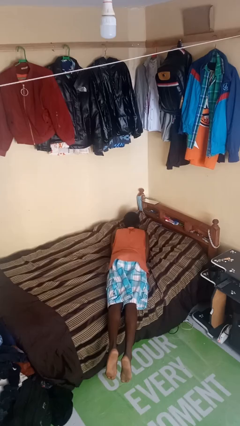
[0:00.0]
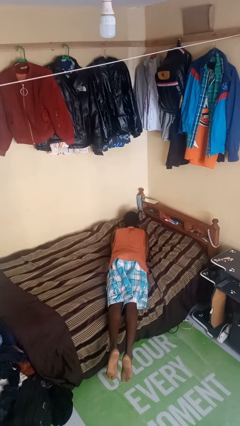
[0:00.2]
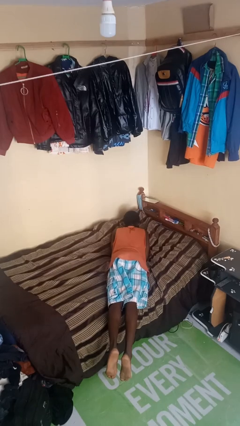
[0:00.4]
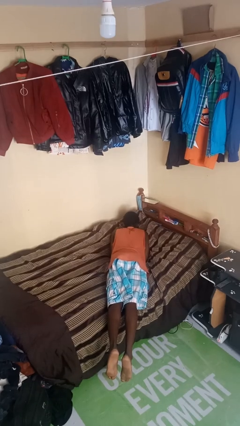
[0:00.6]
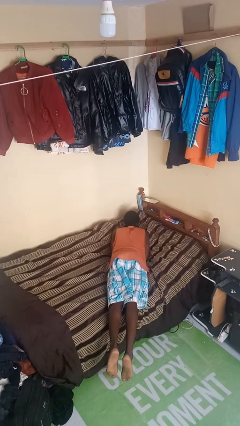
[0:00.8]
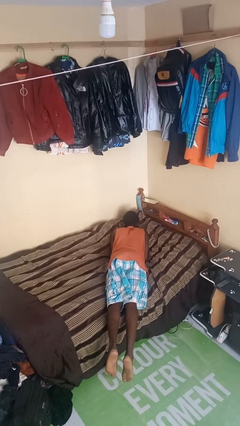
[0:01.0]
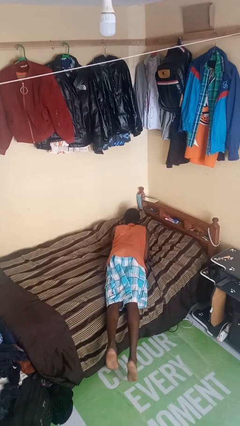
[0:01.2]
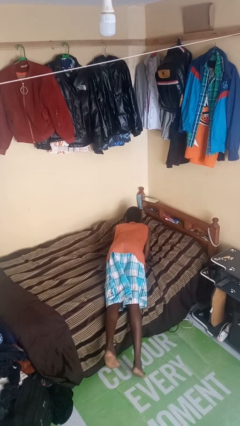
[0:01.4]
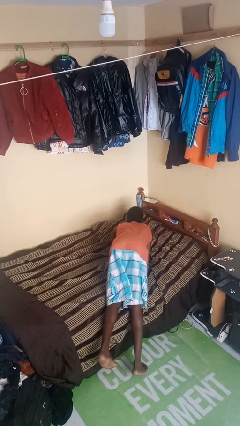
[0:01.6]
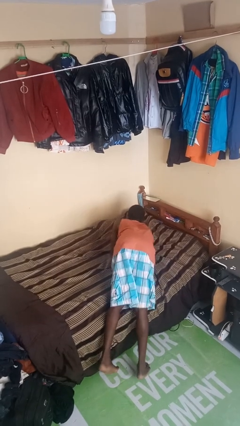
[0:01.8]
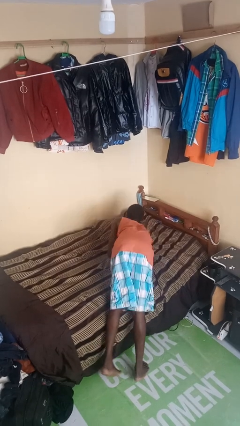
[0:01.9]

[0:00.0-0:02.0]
person lies down on bed

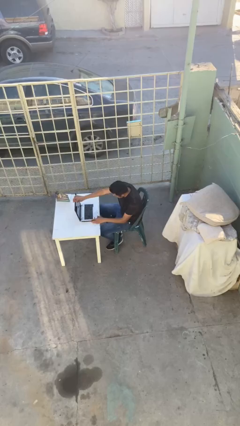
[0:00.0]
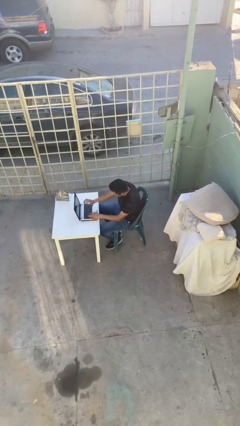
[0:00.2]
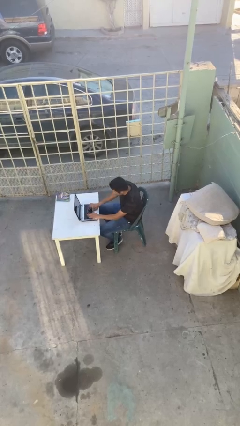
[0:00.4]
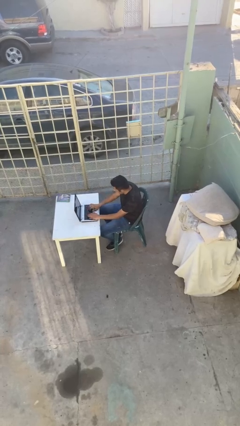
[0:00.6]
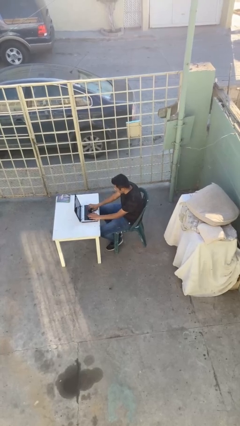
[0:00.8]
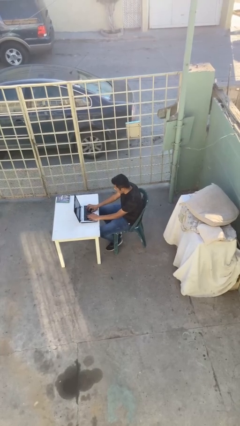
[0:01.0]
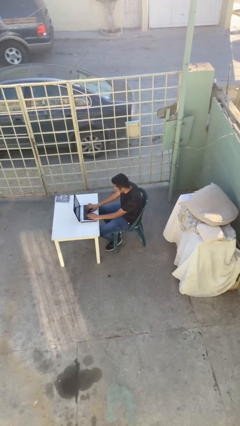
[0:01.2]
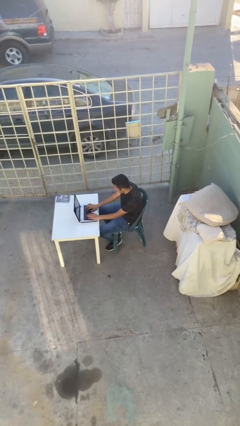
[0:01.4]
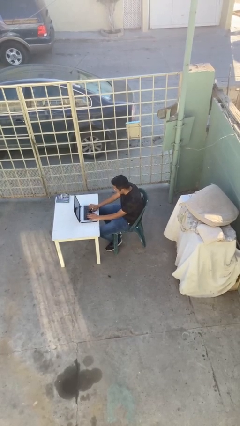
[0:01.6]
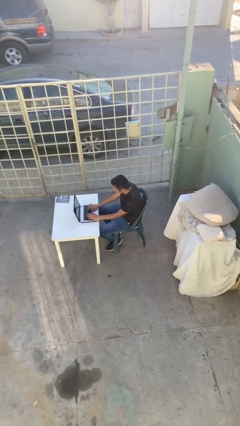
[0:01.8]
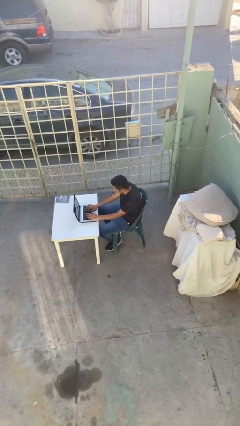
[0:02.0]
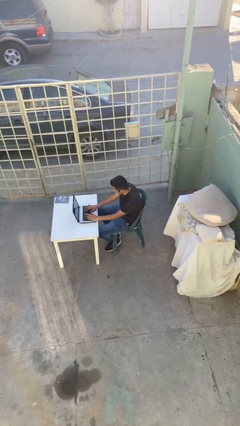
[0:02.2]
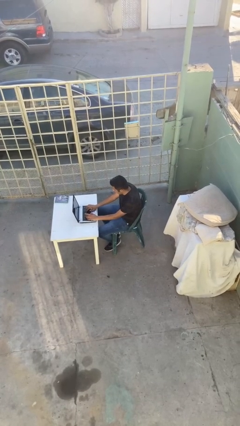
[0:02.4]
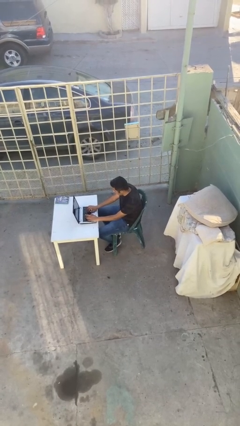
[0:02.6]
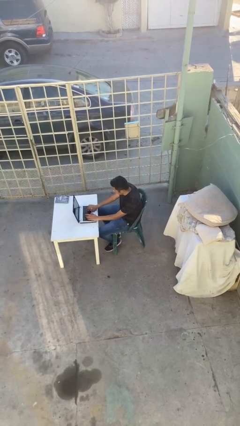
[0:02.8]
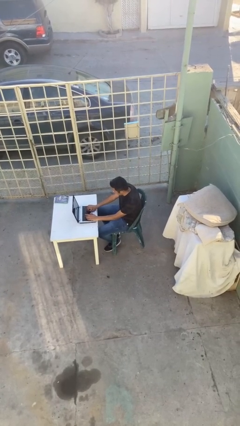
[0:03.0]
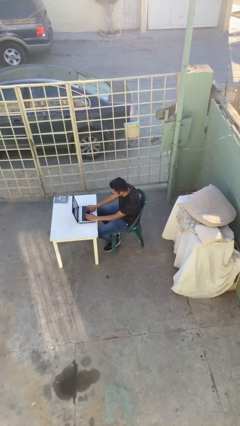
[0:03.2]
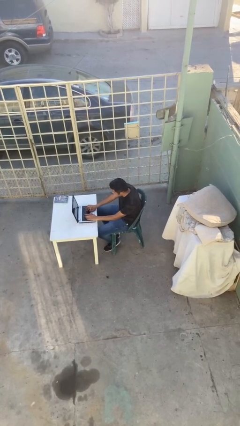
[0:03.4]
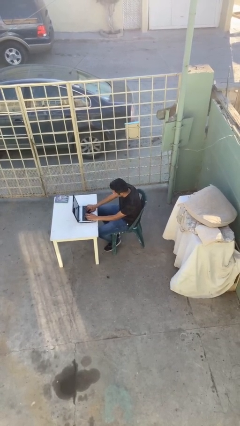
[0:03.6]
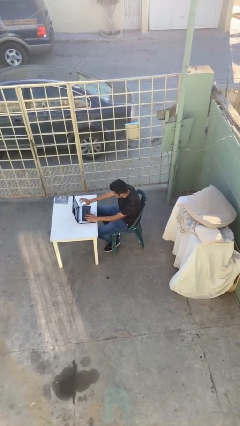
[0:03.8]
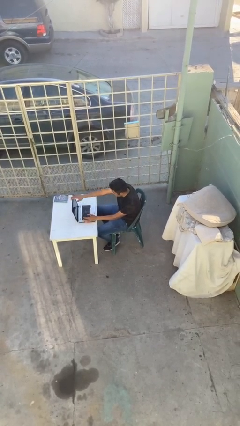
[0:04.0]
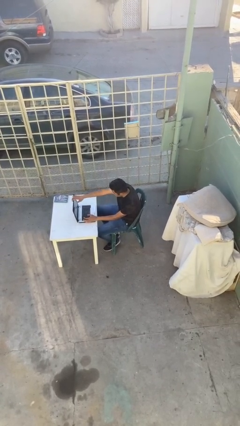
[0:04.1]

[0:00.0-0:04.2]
person interacts with laptop

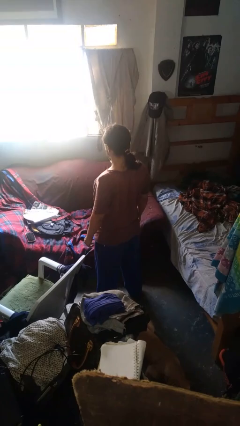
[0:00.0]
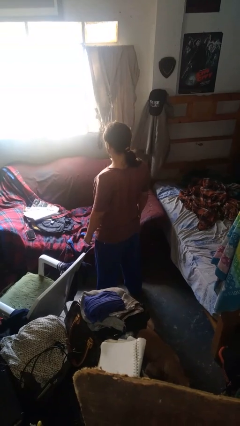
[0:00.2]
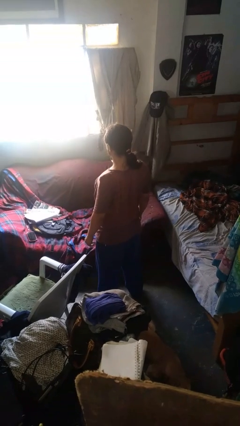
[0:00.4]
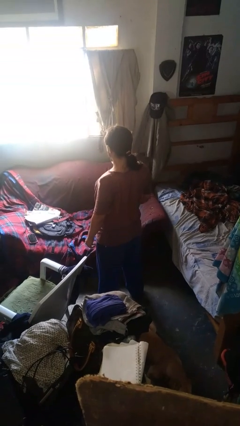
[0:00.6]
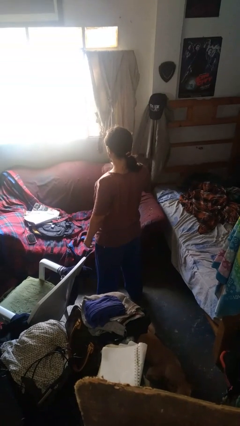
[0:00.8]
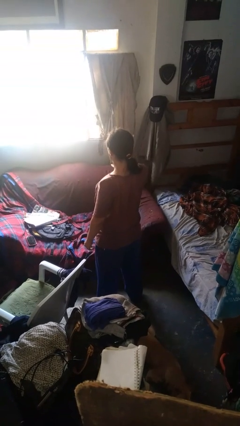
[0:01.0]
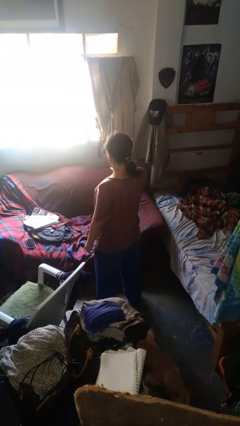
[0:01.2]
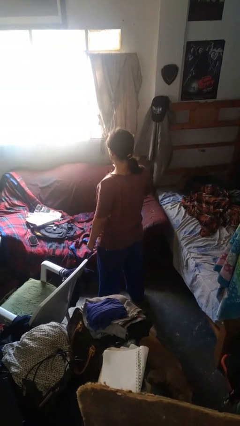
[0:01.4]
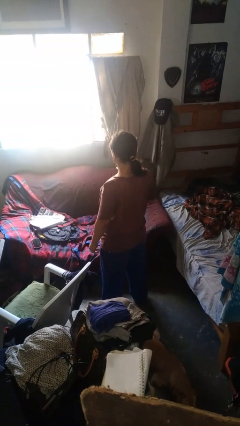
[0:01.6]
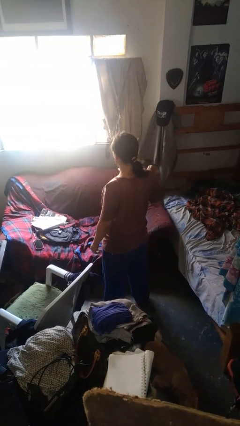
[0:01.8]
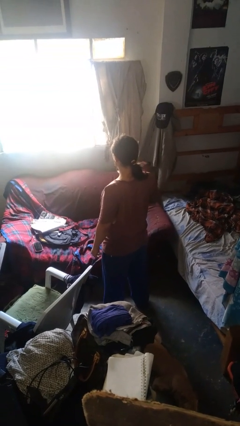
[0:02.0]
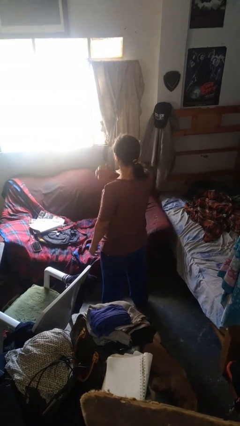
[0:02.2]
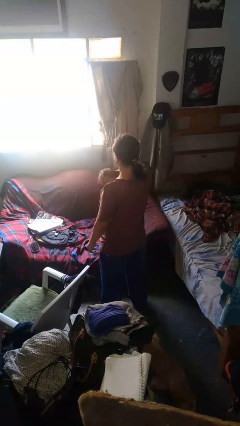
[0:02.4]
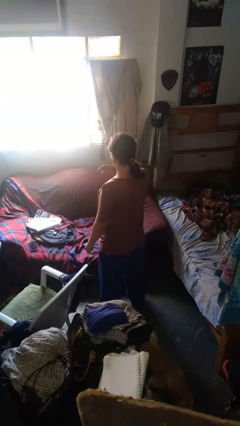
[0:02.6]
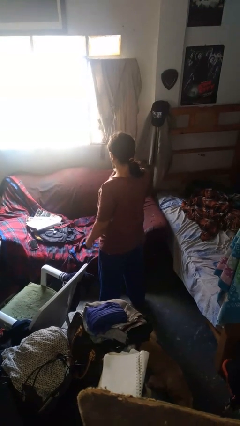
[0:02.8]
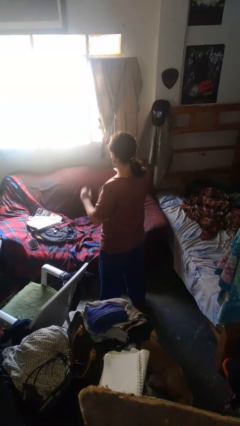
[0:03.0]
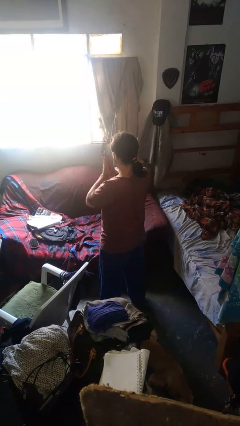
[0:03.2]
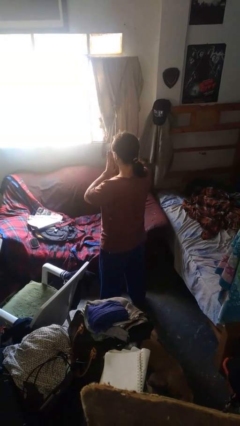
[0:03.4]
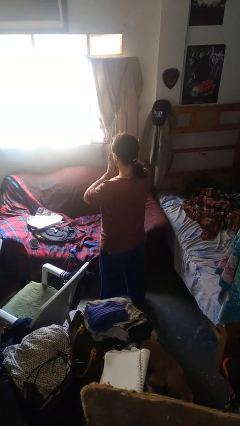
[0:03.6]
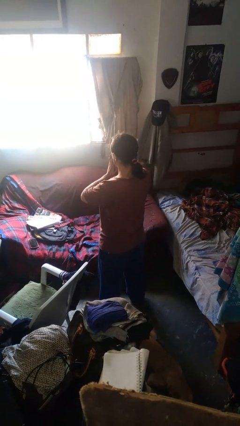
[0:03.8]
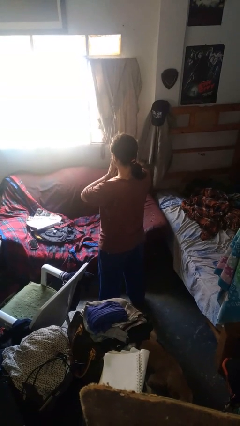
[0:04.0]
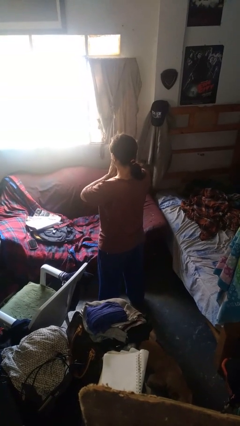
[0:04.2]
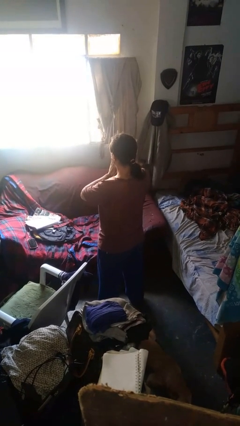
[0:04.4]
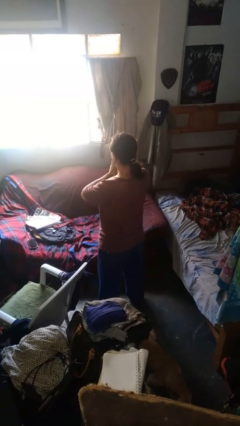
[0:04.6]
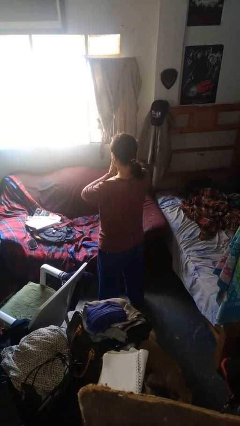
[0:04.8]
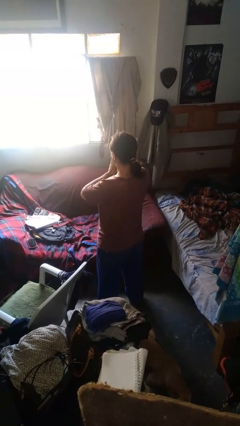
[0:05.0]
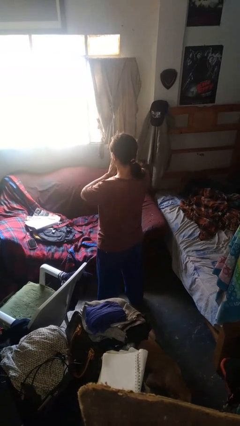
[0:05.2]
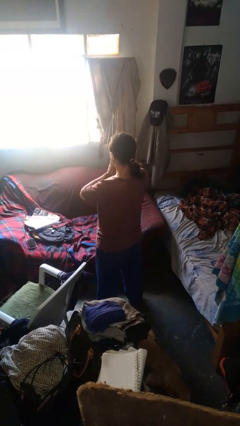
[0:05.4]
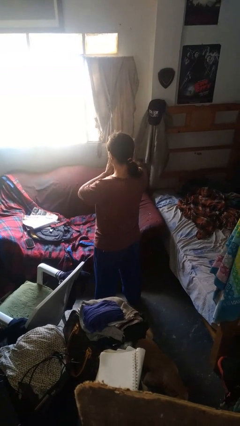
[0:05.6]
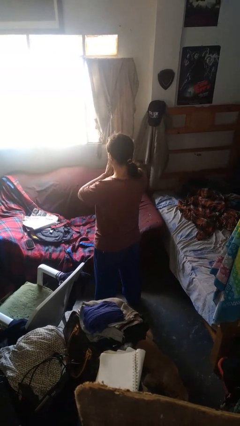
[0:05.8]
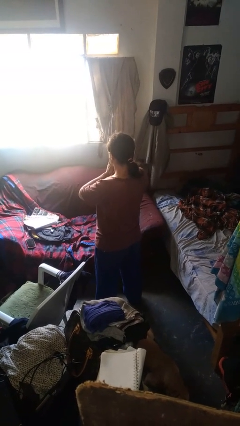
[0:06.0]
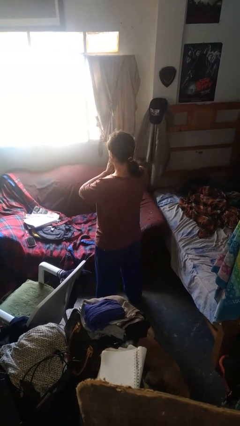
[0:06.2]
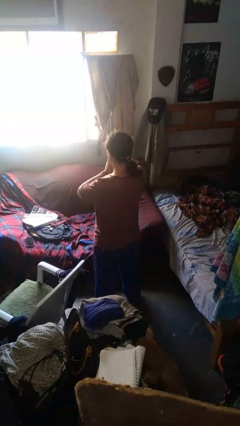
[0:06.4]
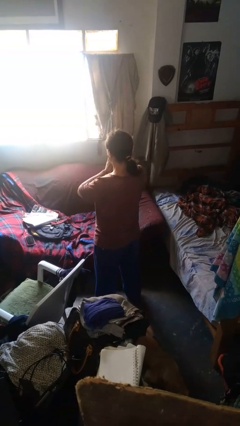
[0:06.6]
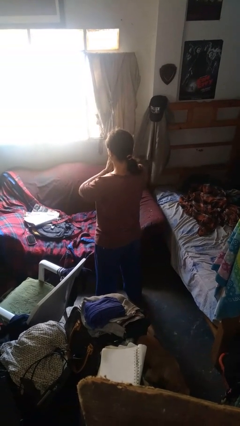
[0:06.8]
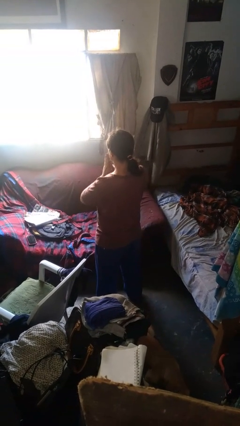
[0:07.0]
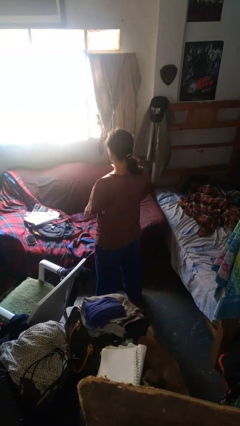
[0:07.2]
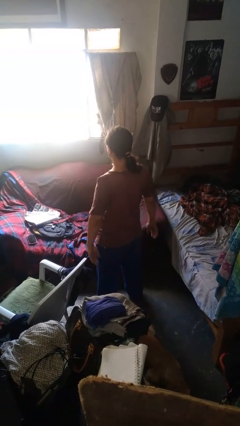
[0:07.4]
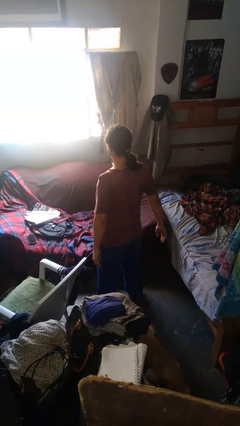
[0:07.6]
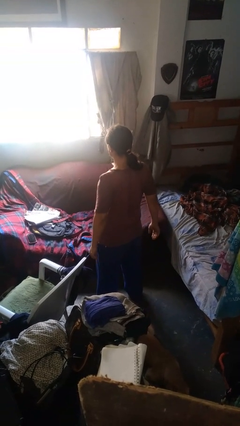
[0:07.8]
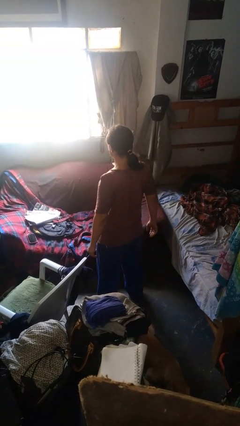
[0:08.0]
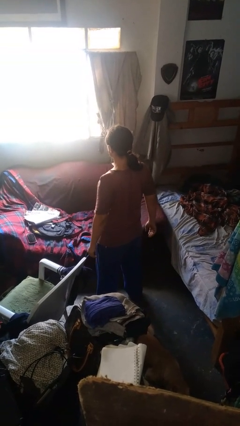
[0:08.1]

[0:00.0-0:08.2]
person prays

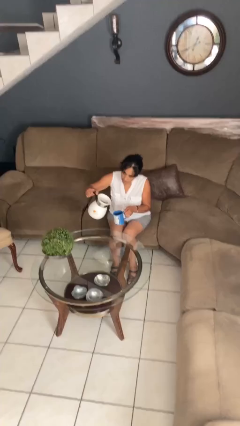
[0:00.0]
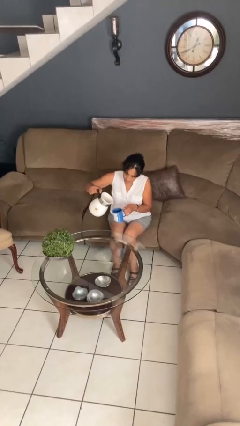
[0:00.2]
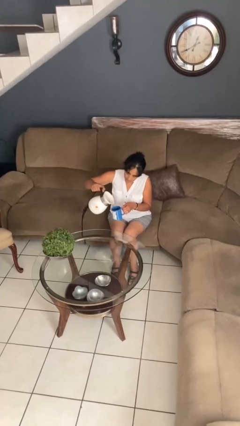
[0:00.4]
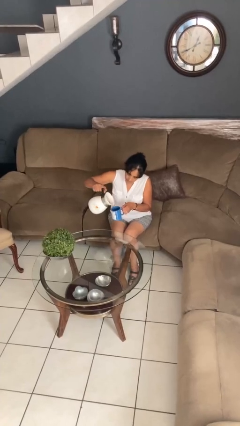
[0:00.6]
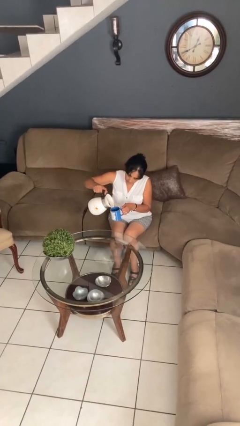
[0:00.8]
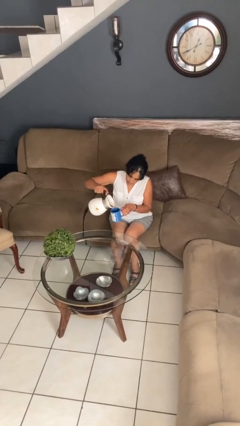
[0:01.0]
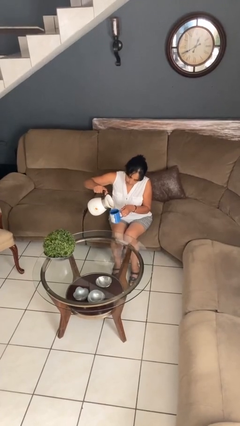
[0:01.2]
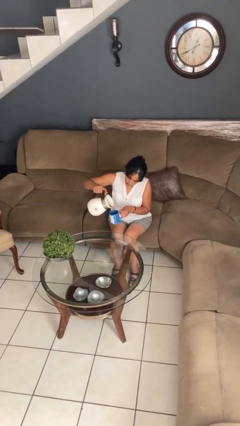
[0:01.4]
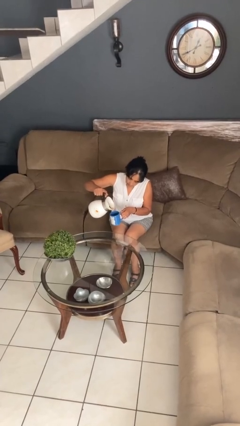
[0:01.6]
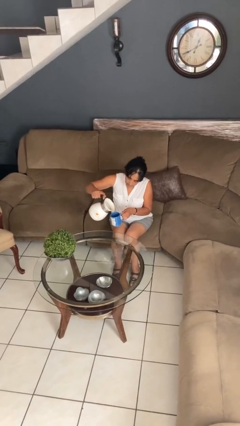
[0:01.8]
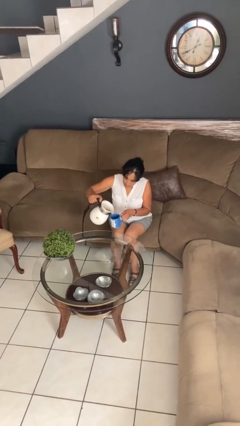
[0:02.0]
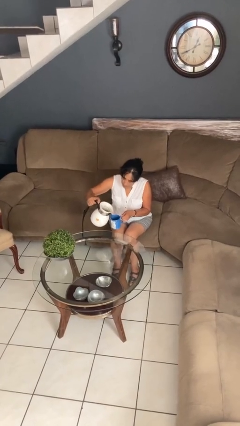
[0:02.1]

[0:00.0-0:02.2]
person pours coffee into mug

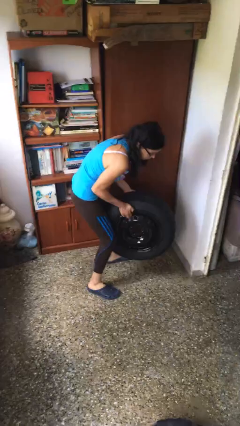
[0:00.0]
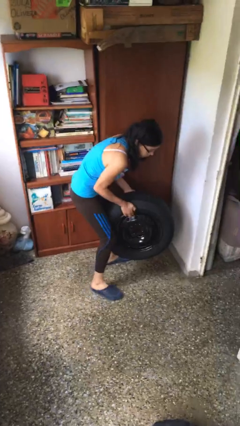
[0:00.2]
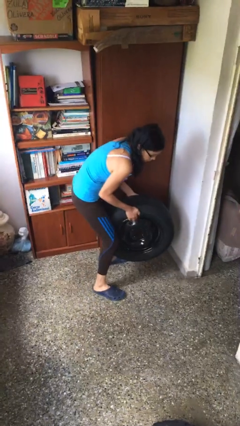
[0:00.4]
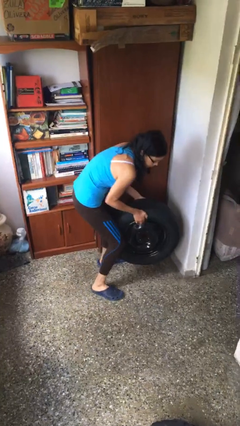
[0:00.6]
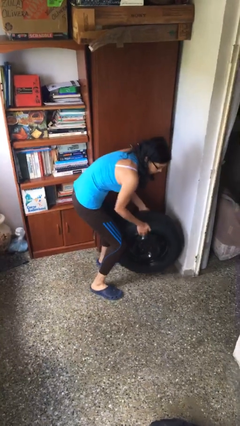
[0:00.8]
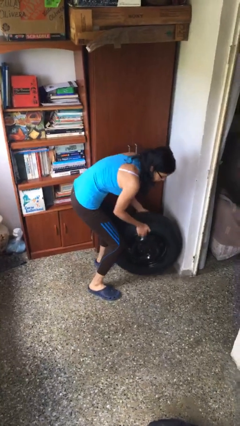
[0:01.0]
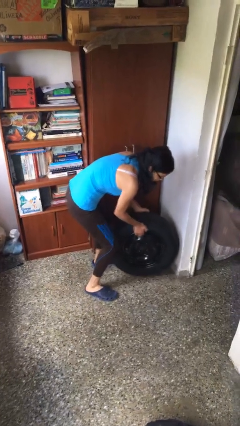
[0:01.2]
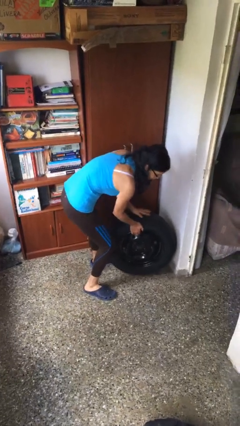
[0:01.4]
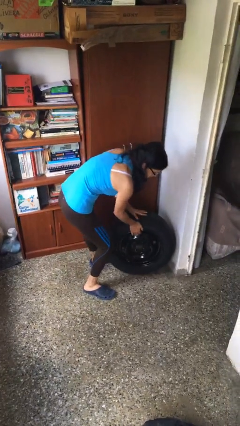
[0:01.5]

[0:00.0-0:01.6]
person puts down object on floor
